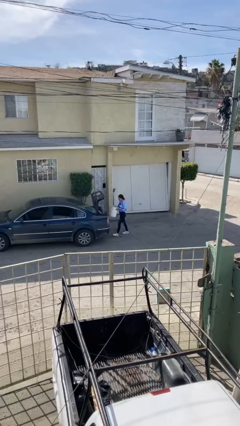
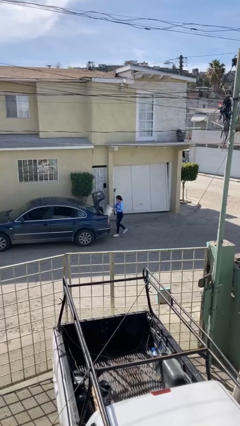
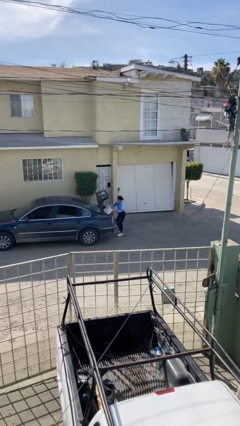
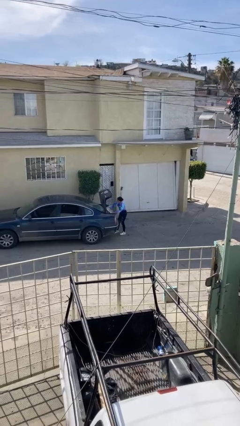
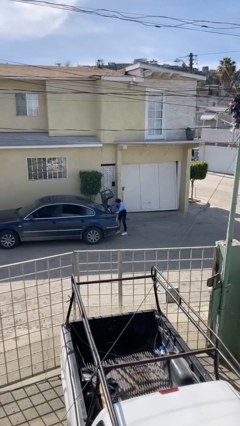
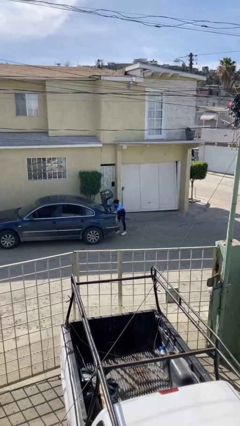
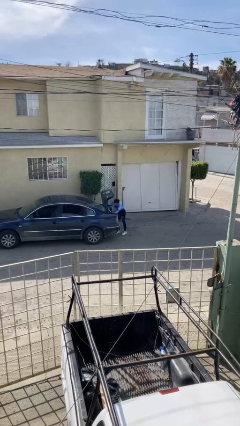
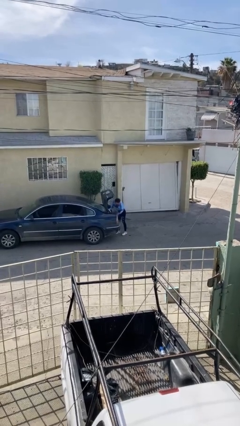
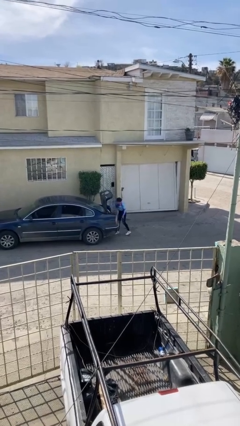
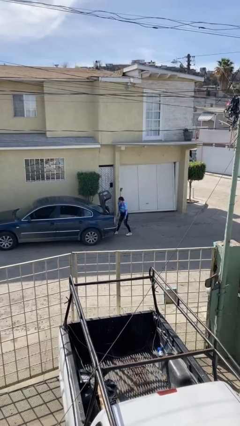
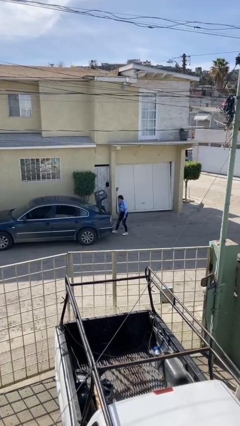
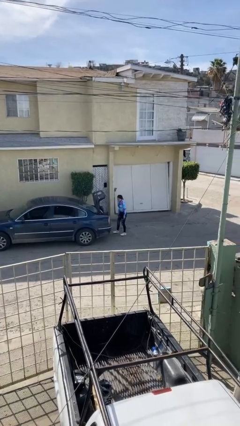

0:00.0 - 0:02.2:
person loads car

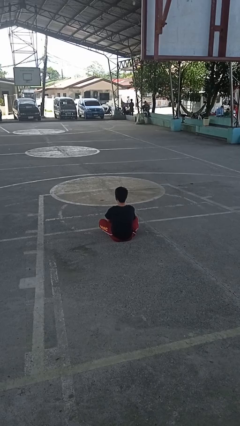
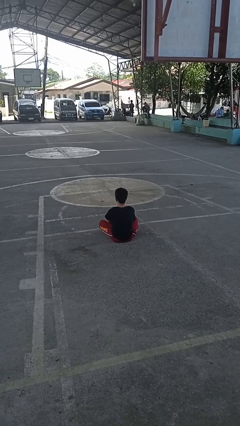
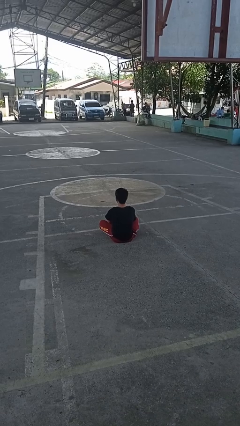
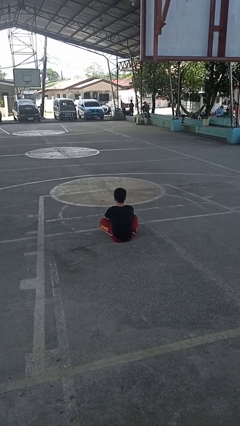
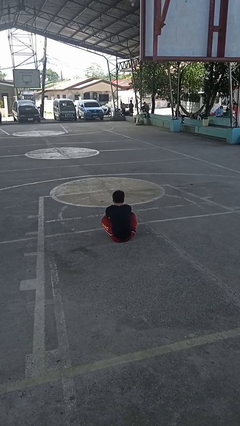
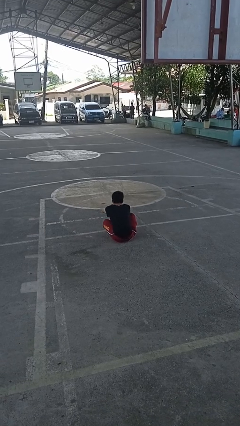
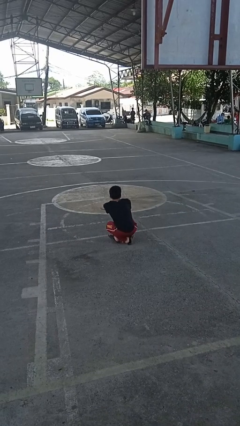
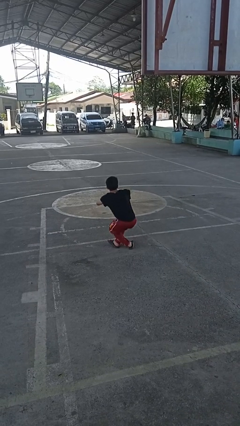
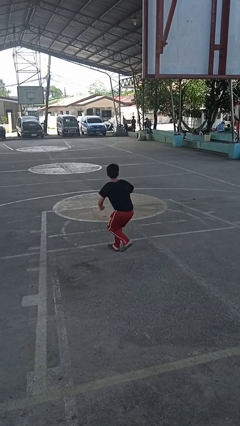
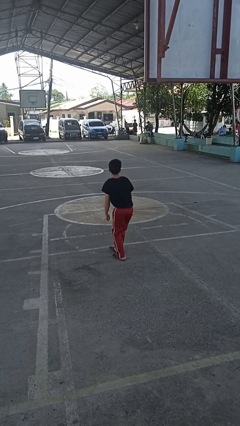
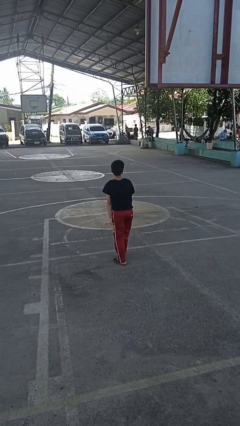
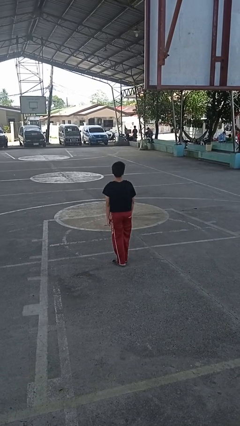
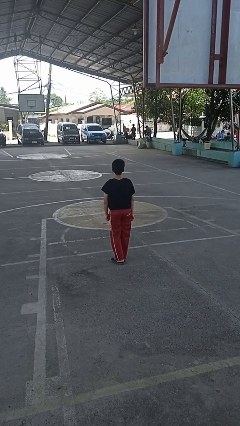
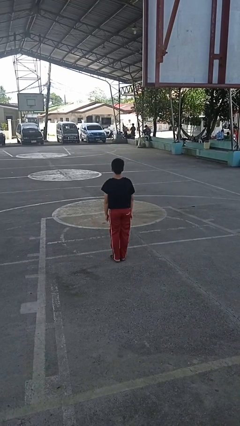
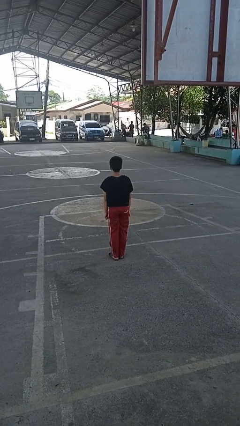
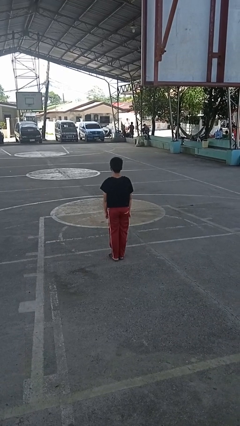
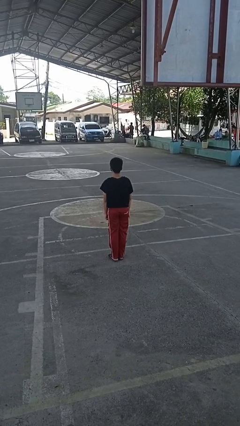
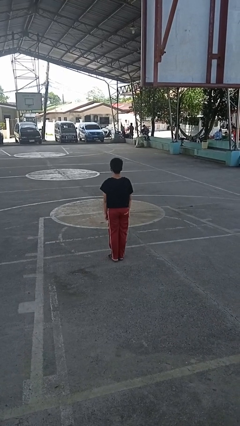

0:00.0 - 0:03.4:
person stands up from floor

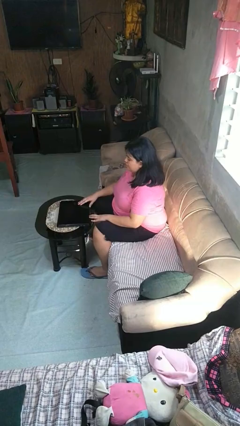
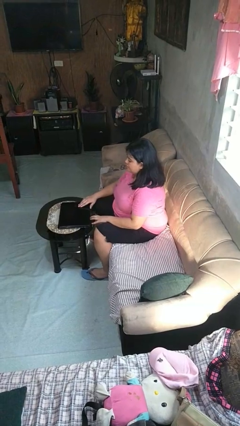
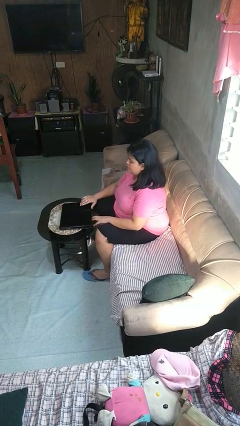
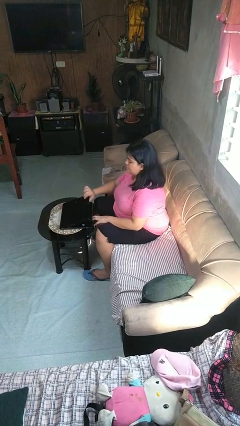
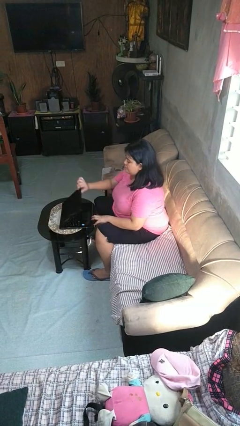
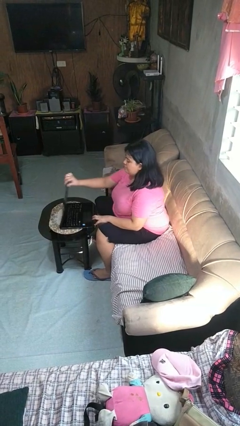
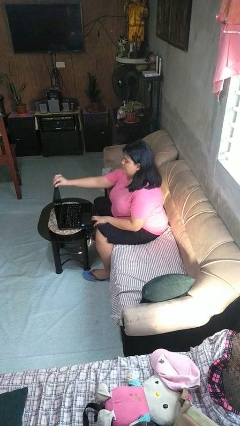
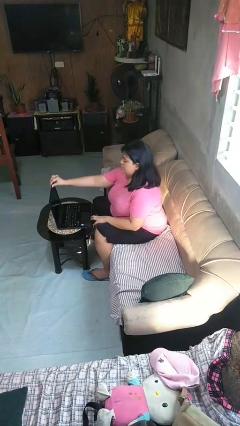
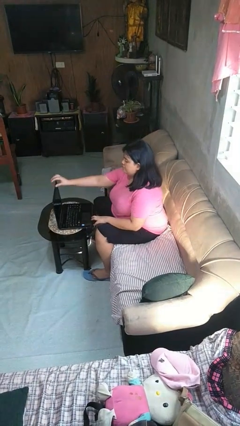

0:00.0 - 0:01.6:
person opens laptop

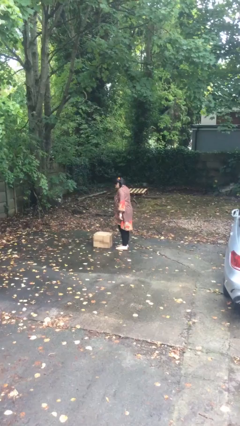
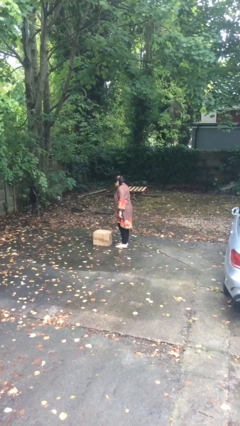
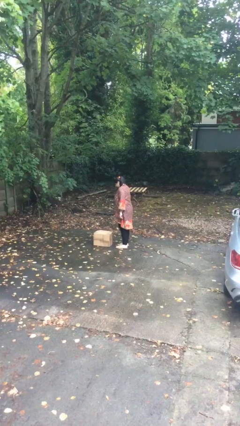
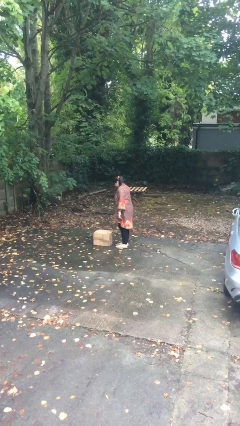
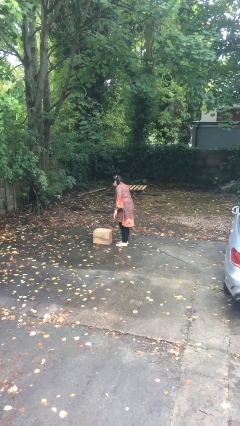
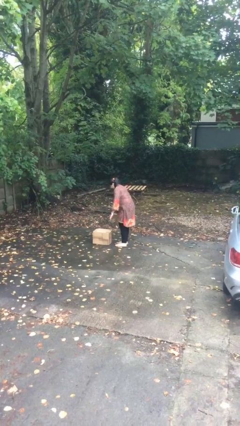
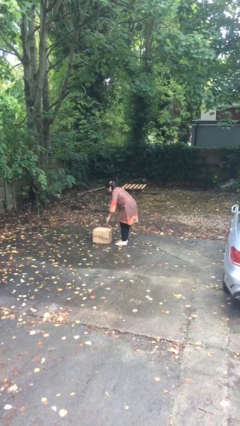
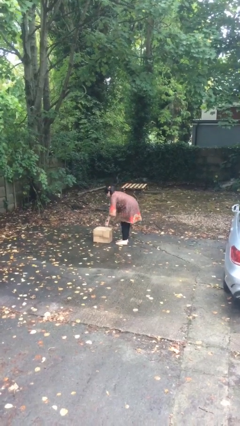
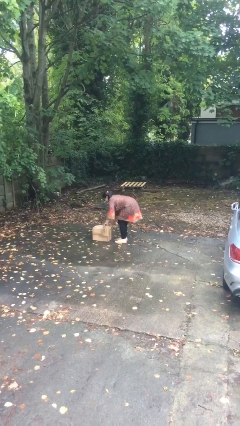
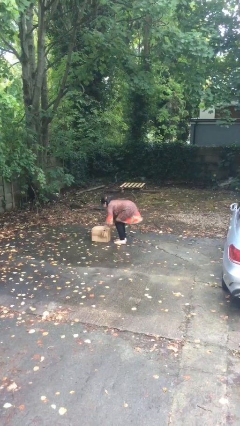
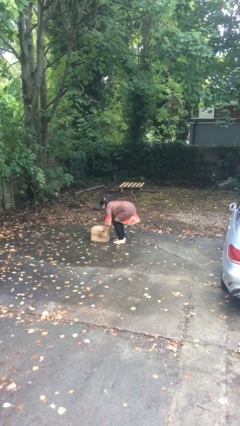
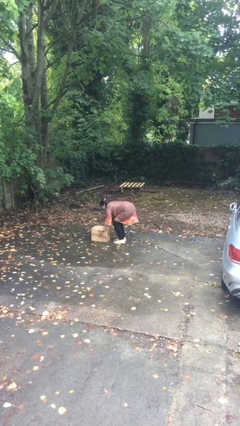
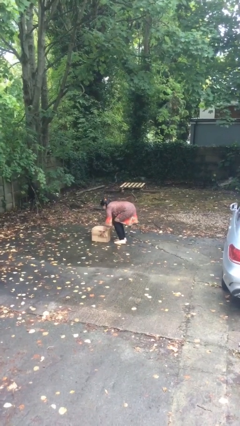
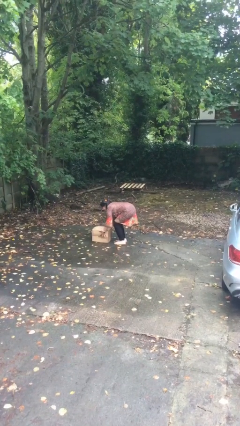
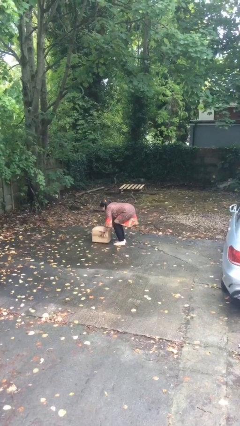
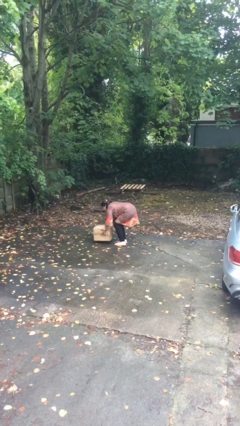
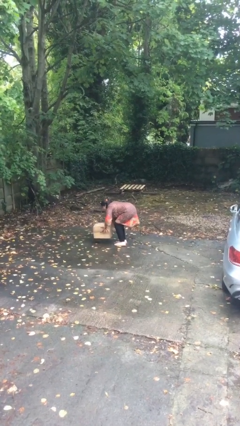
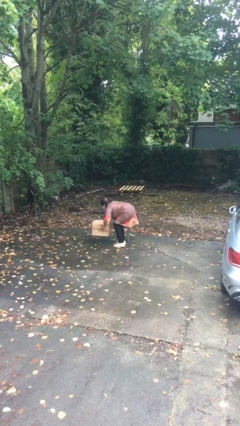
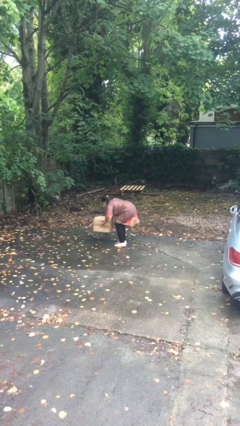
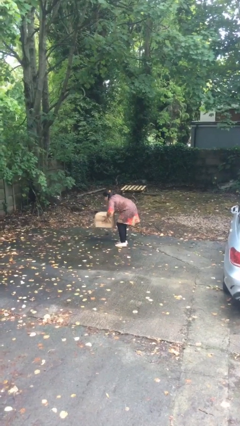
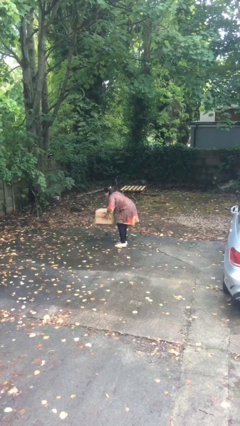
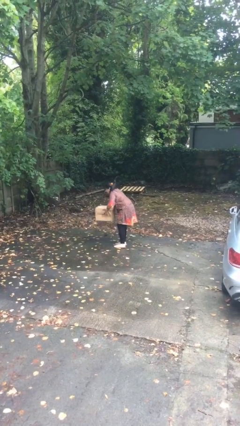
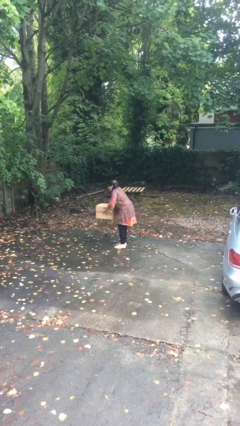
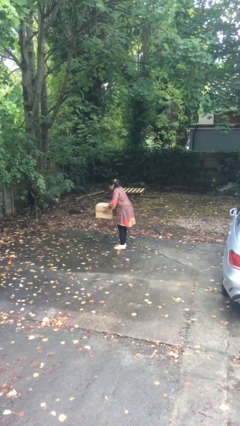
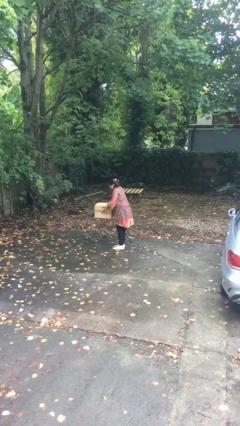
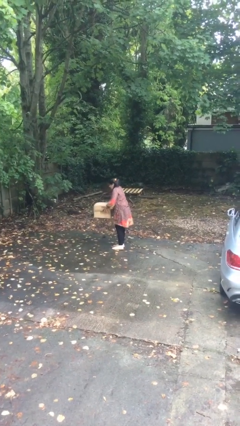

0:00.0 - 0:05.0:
person picks up object from floor

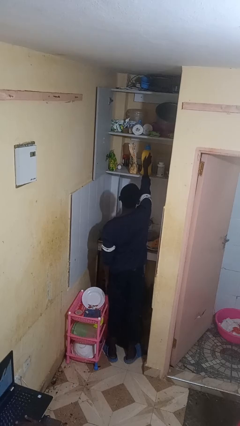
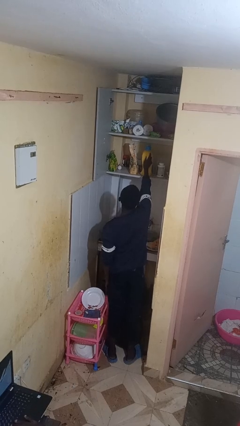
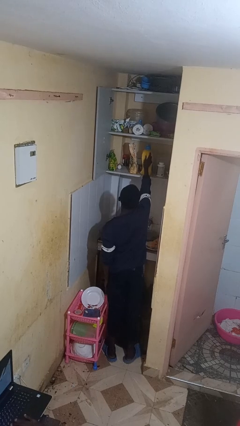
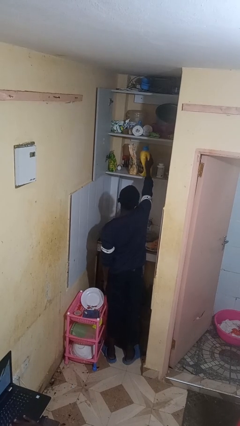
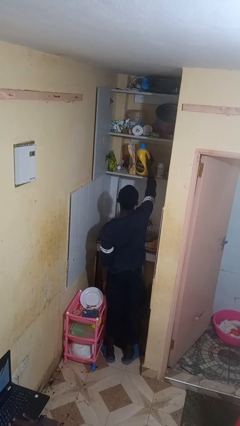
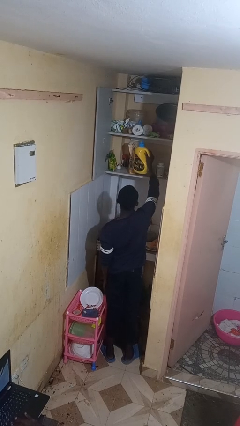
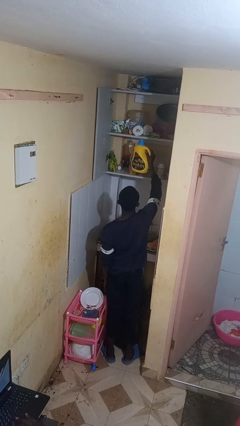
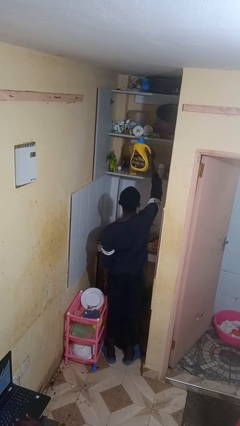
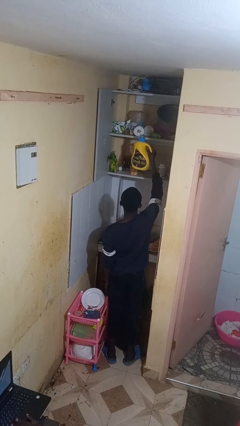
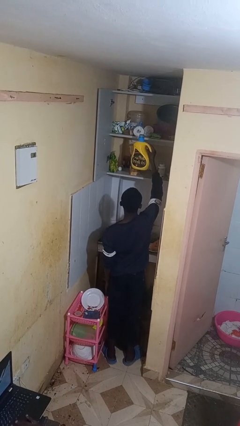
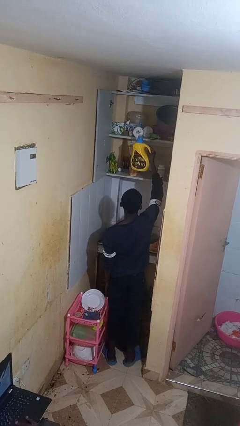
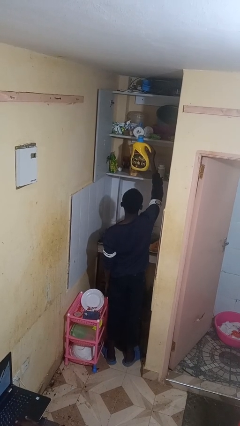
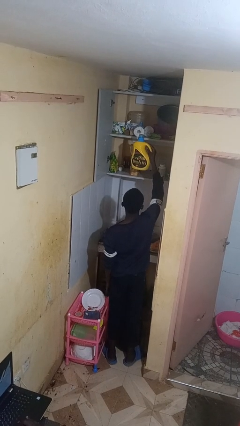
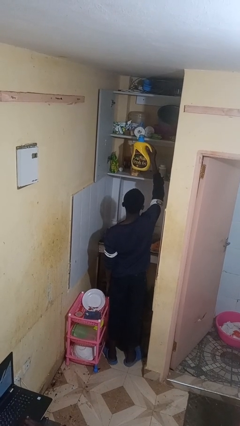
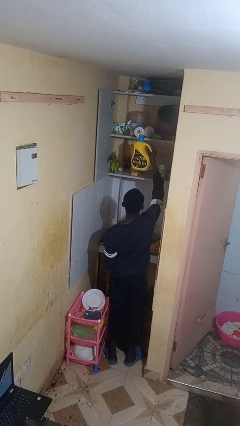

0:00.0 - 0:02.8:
person takes object from cabinet

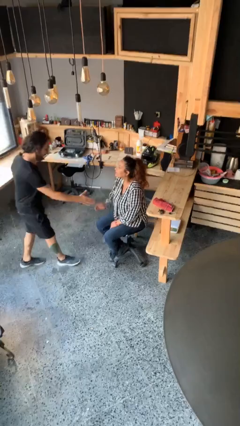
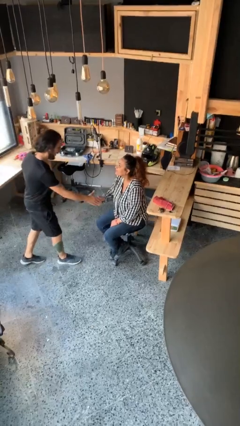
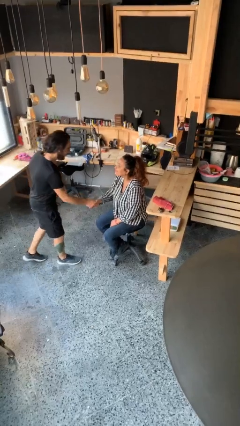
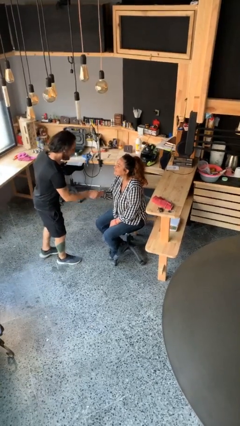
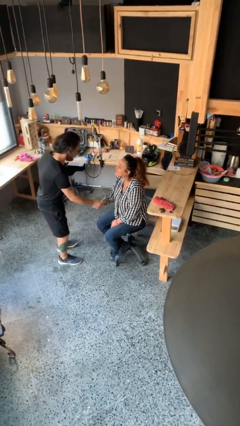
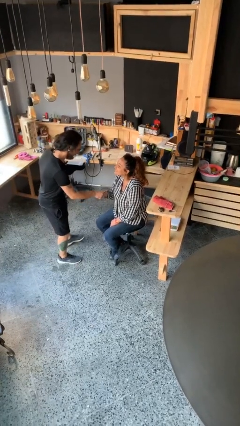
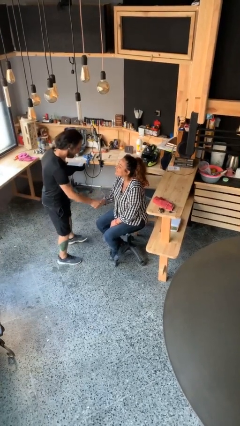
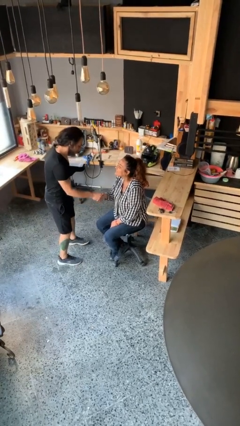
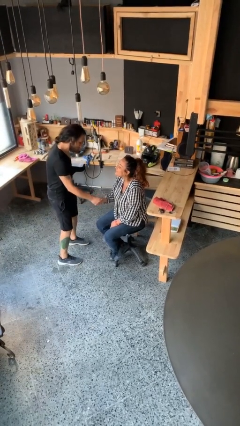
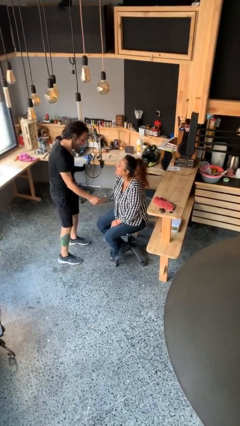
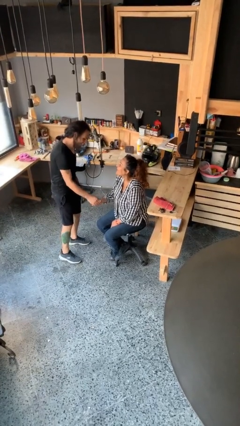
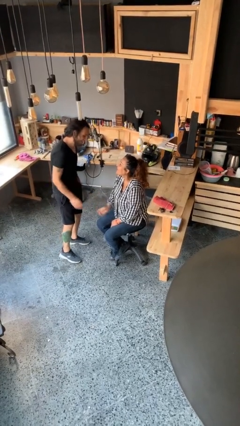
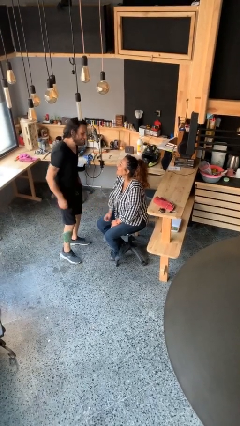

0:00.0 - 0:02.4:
person shakes hand
